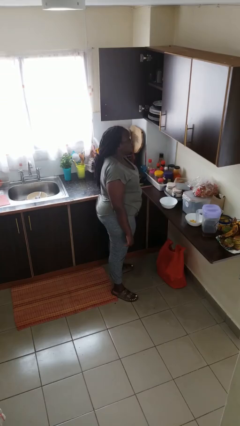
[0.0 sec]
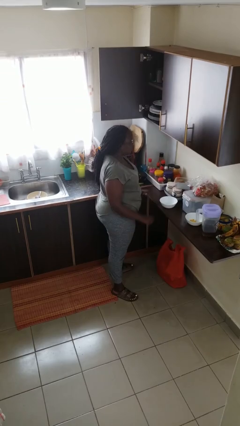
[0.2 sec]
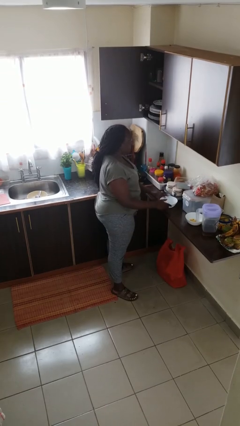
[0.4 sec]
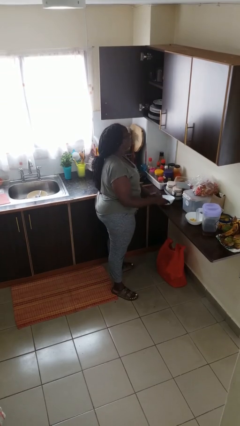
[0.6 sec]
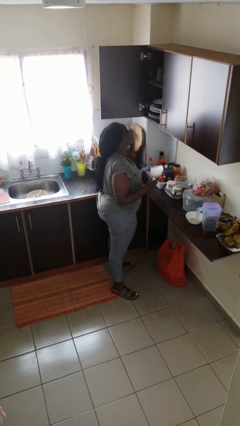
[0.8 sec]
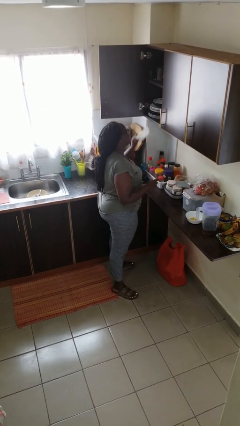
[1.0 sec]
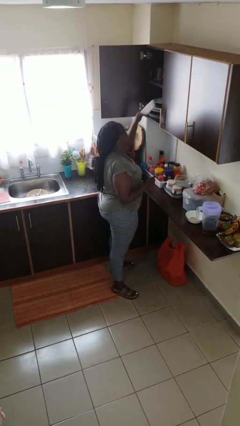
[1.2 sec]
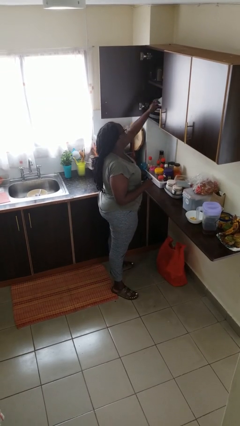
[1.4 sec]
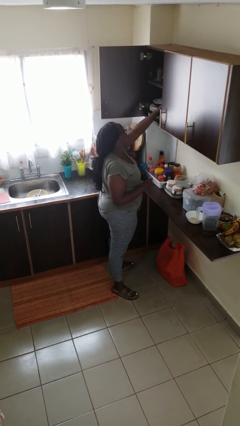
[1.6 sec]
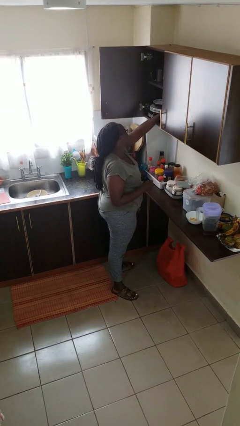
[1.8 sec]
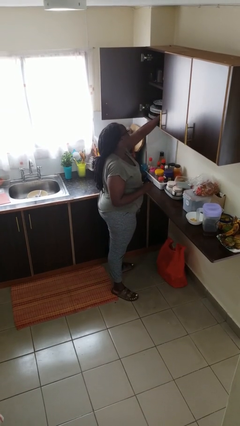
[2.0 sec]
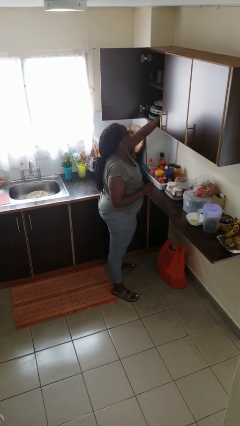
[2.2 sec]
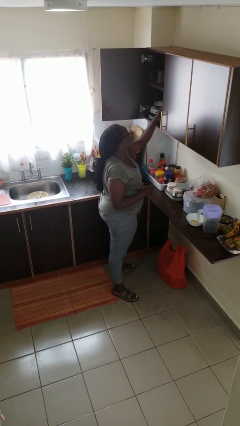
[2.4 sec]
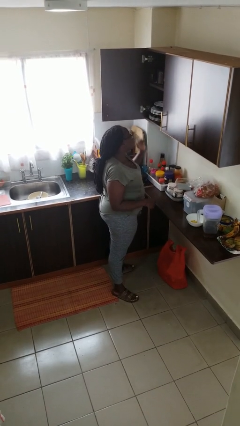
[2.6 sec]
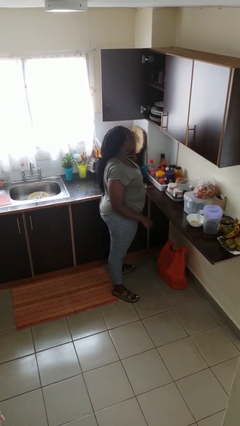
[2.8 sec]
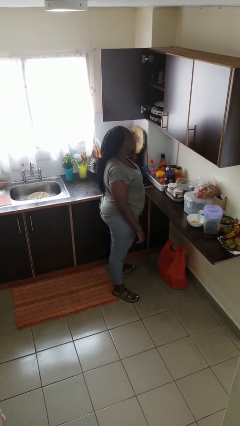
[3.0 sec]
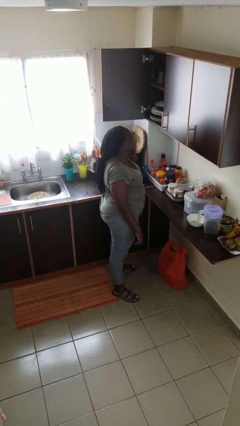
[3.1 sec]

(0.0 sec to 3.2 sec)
person puts object in cabinet

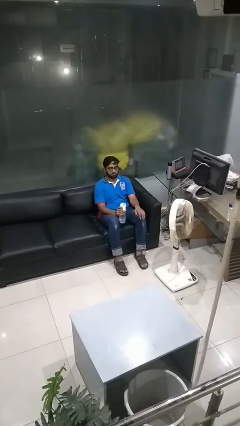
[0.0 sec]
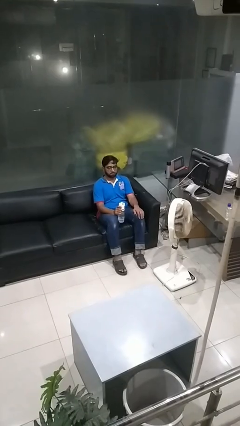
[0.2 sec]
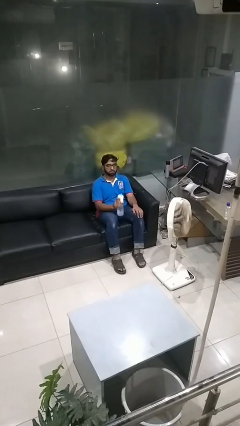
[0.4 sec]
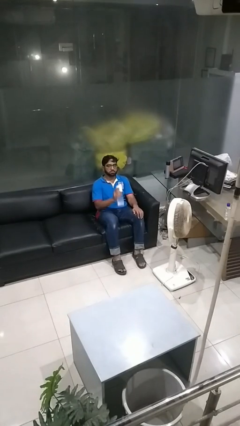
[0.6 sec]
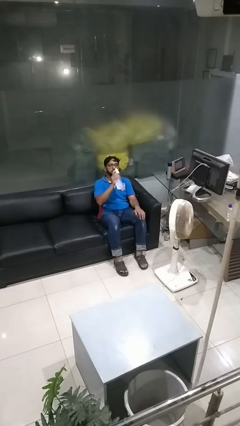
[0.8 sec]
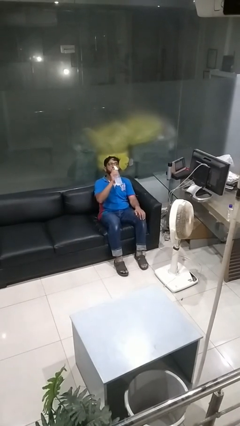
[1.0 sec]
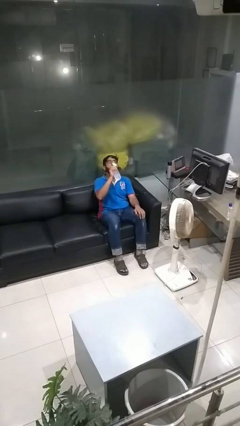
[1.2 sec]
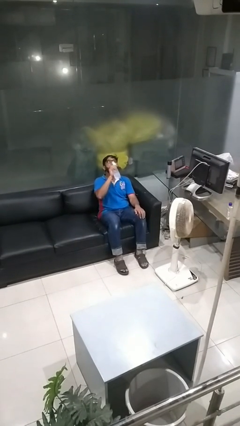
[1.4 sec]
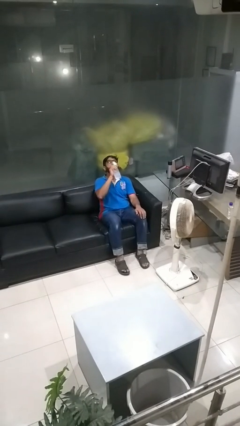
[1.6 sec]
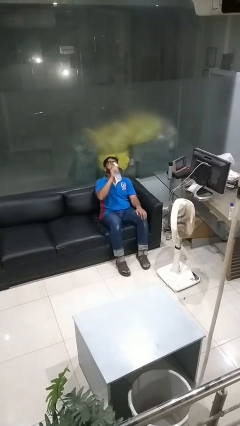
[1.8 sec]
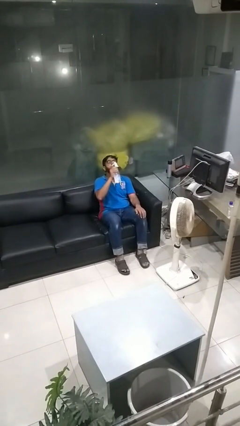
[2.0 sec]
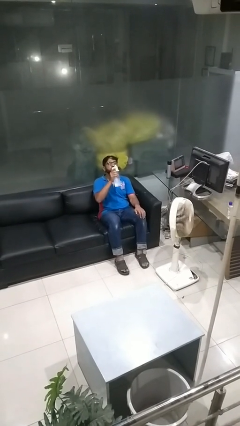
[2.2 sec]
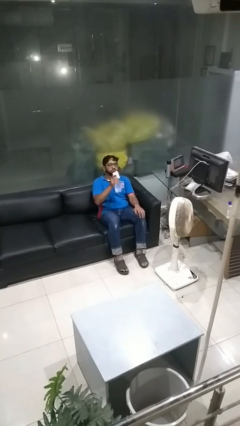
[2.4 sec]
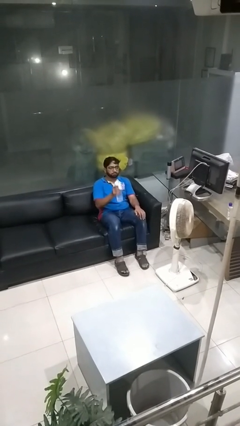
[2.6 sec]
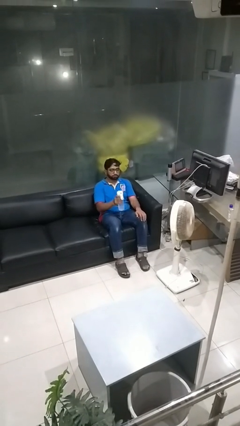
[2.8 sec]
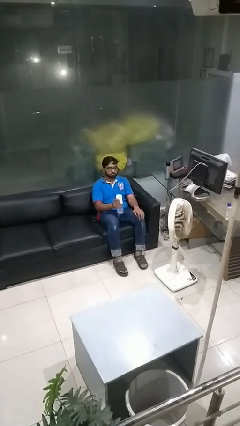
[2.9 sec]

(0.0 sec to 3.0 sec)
person drinks from bottle

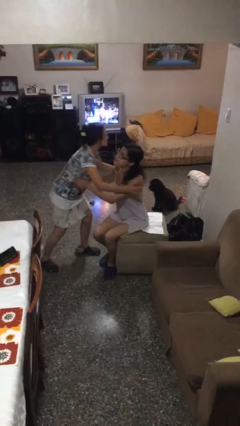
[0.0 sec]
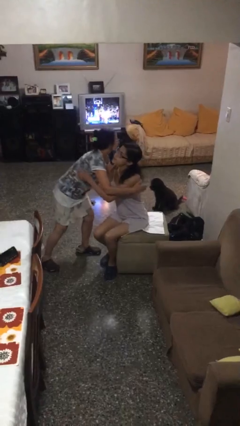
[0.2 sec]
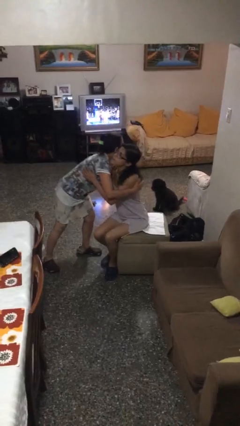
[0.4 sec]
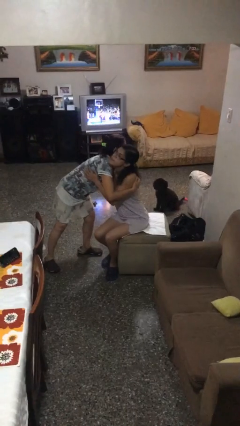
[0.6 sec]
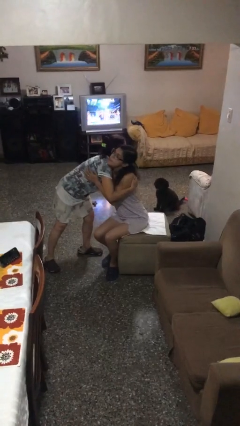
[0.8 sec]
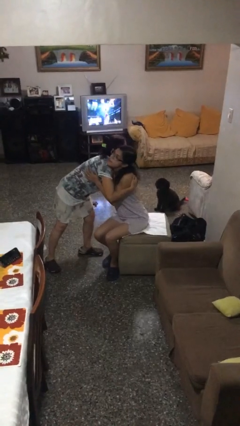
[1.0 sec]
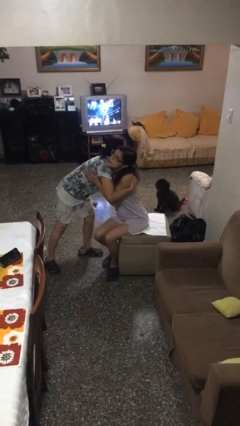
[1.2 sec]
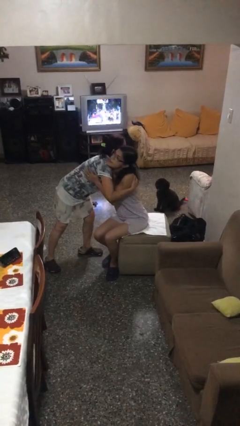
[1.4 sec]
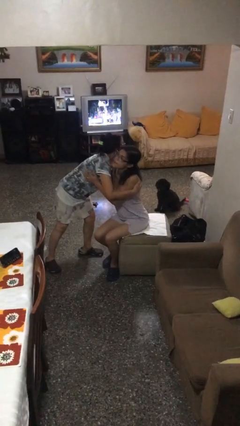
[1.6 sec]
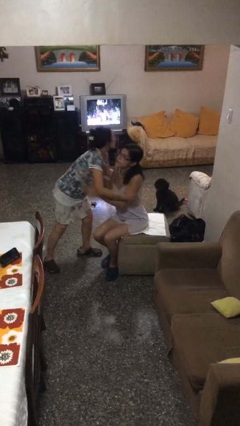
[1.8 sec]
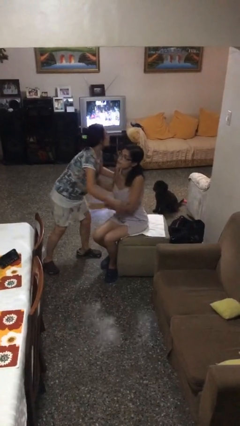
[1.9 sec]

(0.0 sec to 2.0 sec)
person embraces person

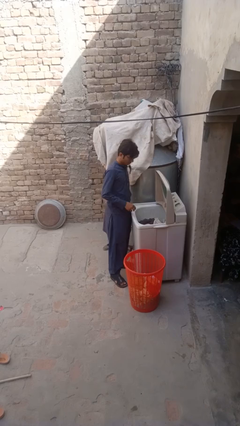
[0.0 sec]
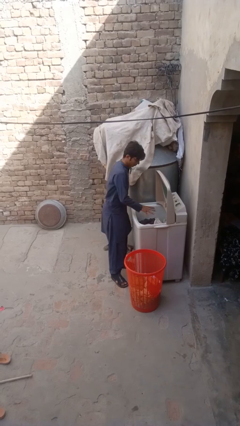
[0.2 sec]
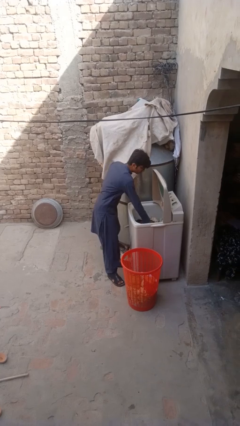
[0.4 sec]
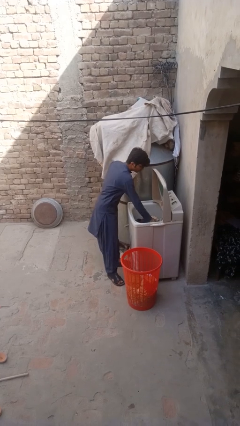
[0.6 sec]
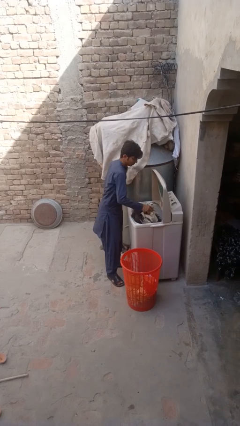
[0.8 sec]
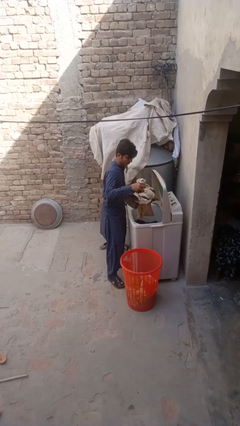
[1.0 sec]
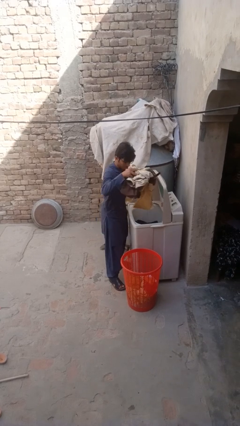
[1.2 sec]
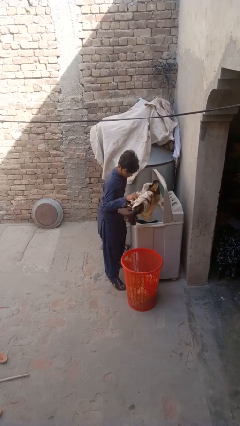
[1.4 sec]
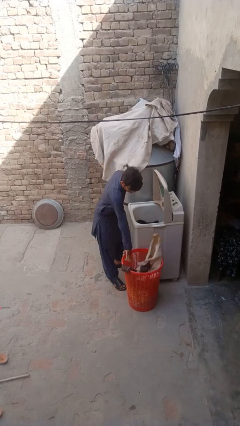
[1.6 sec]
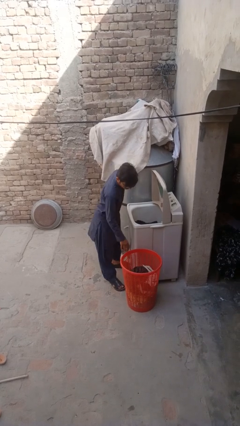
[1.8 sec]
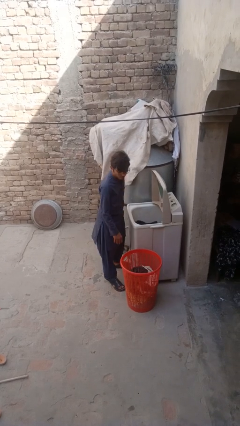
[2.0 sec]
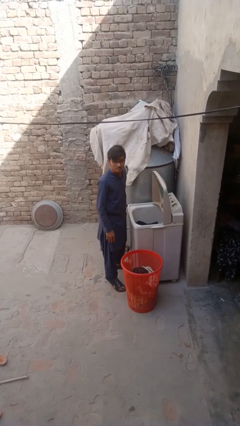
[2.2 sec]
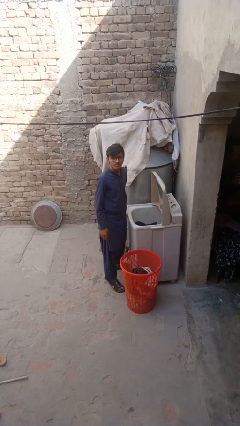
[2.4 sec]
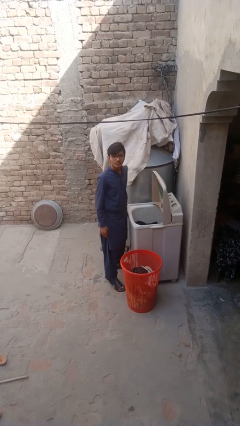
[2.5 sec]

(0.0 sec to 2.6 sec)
person unloads clotheswasher

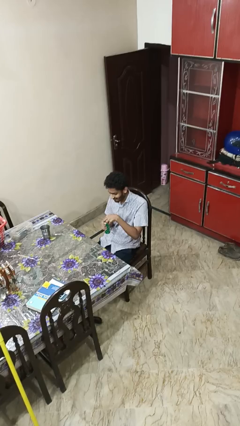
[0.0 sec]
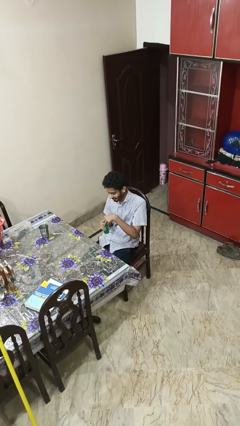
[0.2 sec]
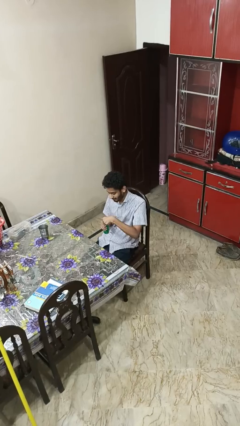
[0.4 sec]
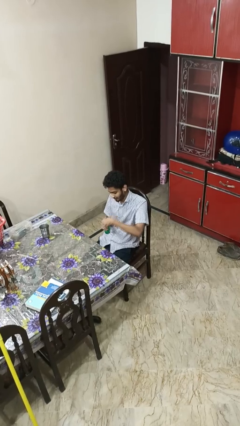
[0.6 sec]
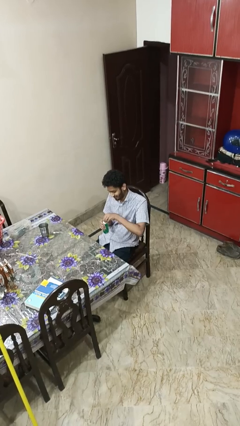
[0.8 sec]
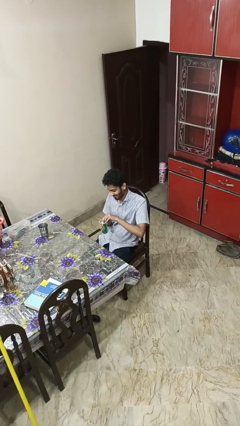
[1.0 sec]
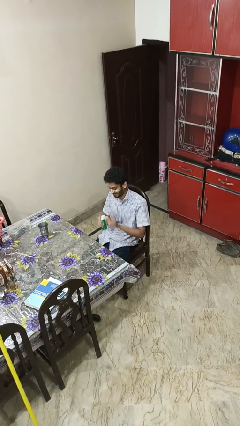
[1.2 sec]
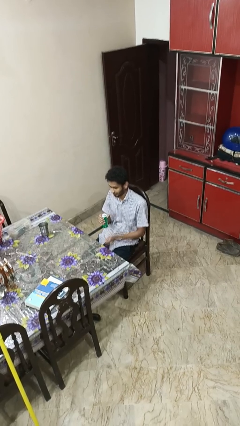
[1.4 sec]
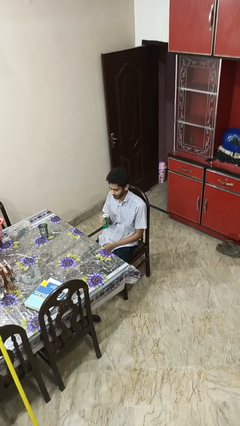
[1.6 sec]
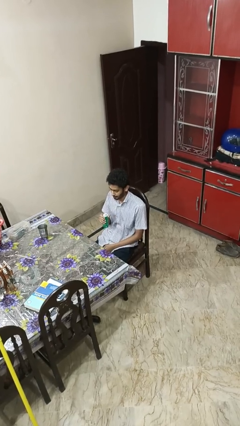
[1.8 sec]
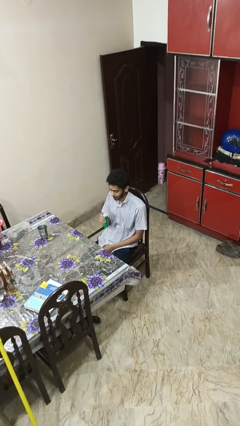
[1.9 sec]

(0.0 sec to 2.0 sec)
person opens beverage can

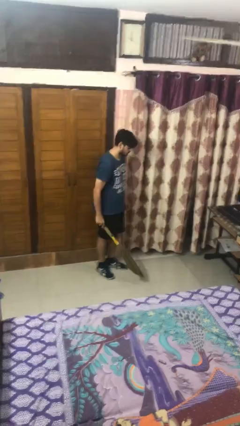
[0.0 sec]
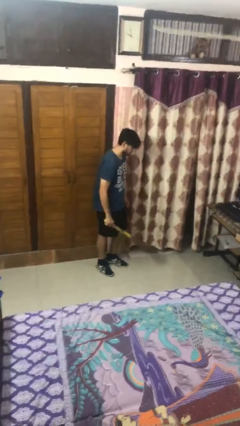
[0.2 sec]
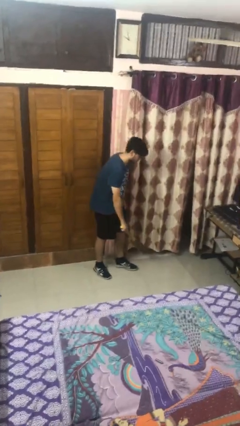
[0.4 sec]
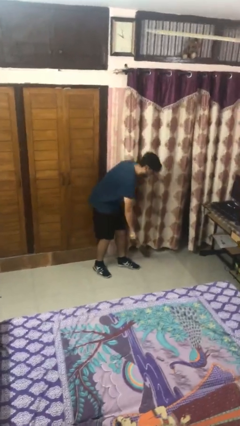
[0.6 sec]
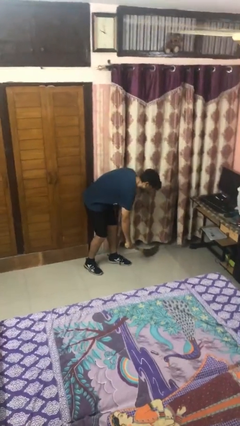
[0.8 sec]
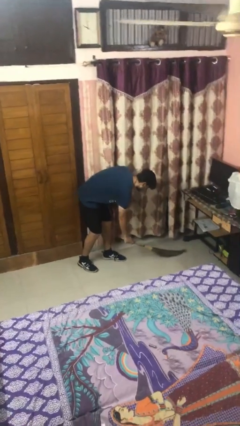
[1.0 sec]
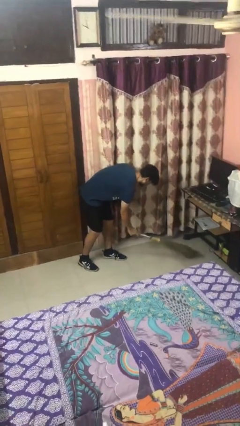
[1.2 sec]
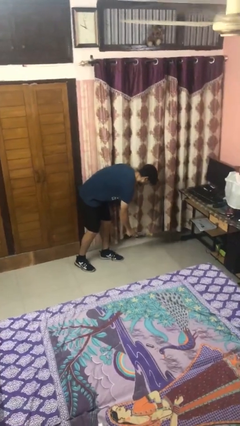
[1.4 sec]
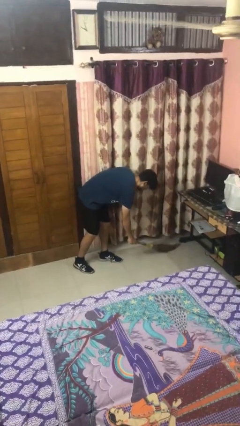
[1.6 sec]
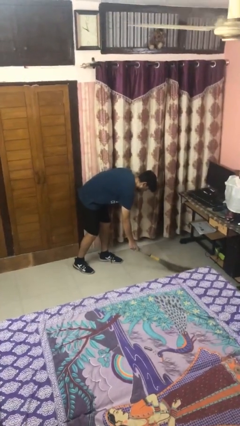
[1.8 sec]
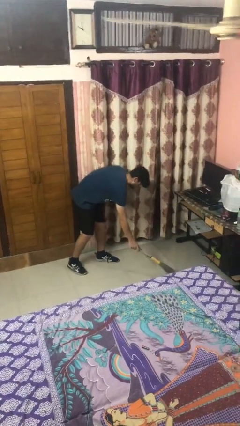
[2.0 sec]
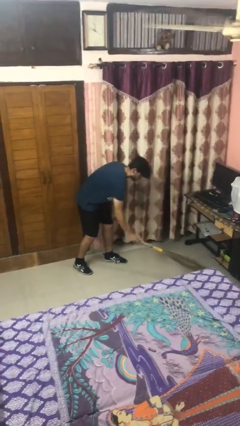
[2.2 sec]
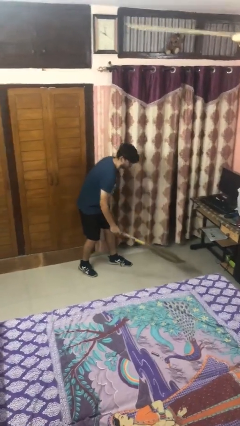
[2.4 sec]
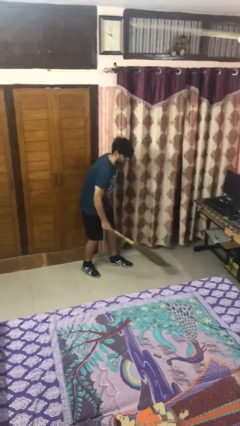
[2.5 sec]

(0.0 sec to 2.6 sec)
person sweeps floor

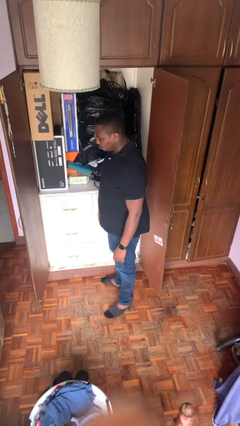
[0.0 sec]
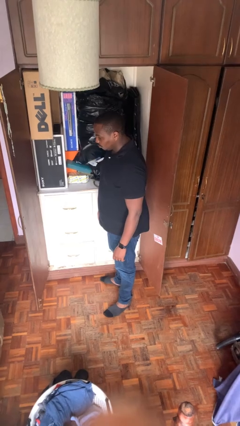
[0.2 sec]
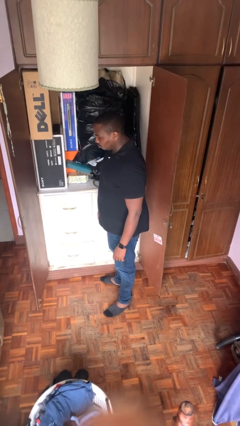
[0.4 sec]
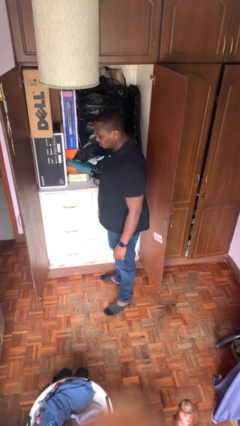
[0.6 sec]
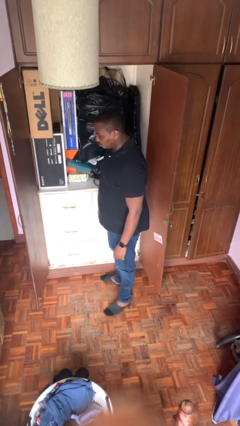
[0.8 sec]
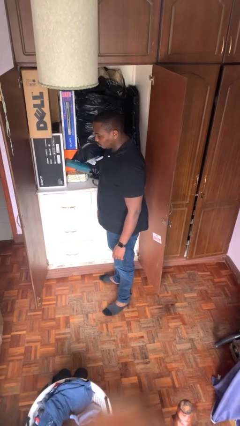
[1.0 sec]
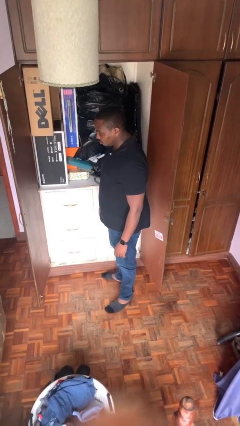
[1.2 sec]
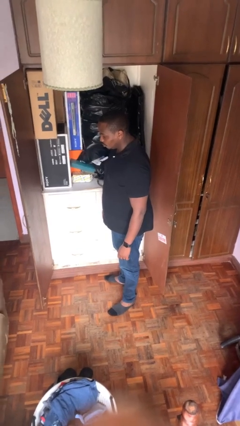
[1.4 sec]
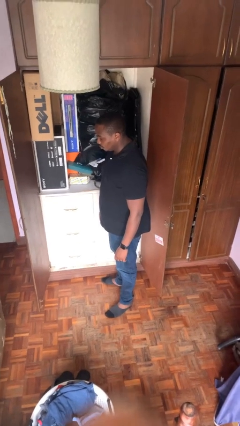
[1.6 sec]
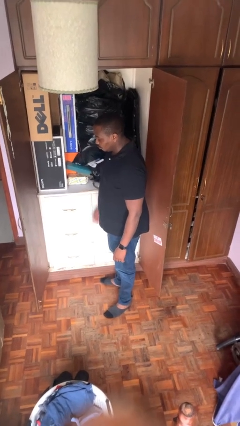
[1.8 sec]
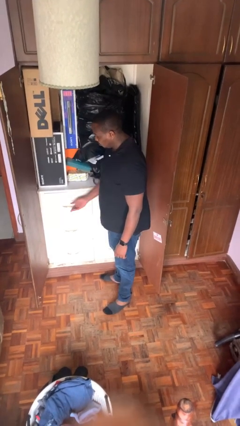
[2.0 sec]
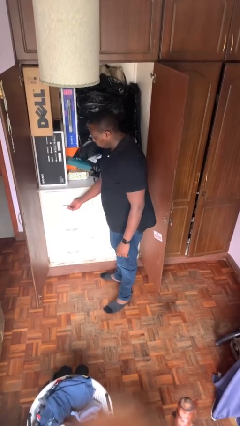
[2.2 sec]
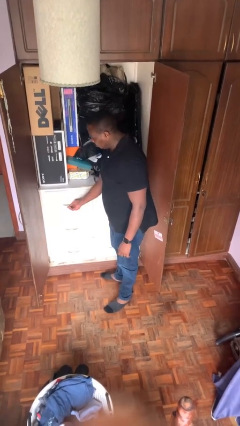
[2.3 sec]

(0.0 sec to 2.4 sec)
person closes dresser drawer
